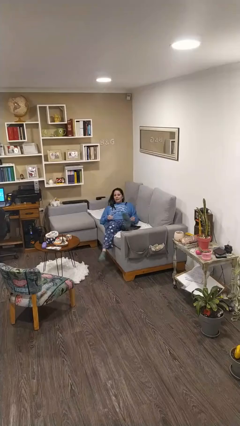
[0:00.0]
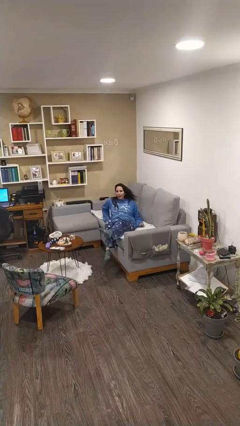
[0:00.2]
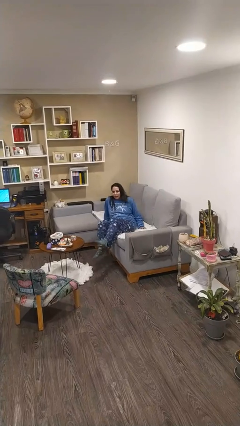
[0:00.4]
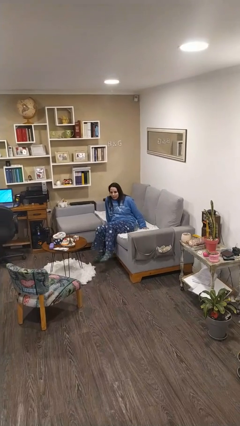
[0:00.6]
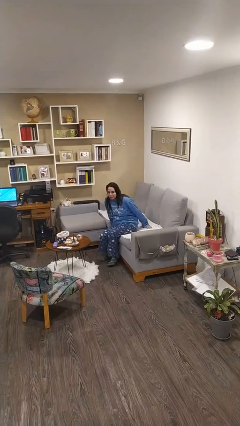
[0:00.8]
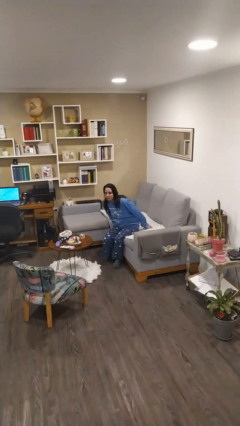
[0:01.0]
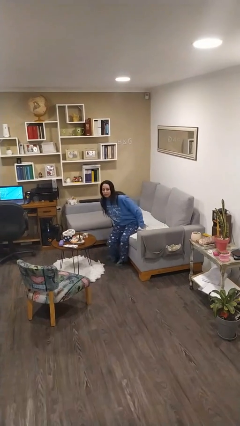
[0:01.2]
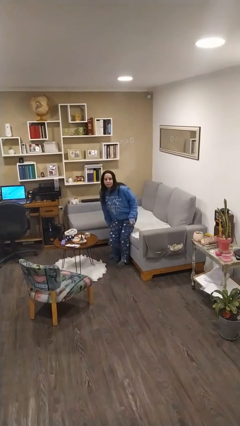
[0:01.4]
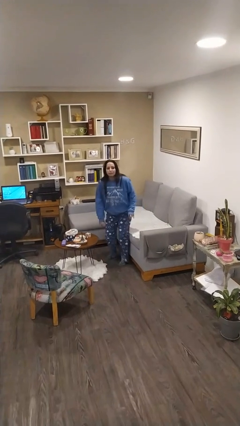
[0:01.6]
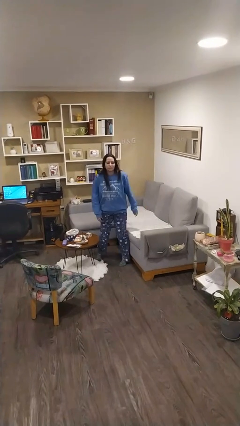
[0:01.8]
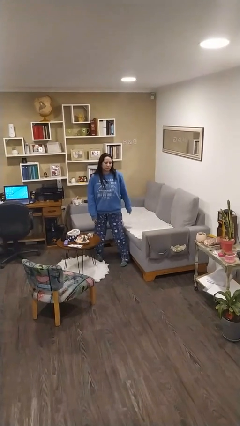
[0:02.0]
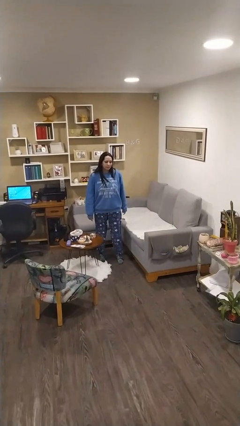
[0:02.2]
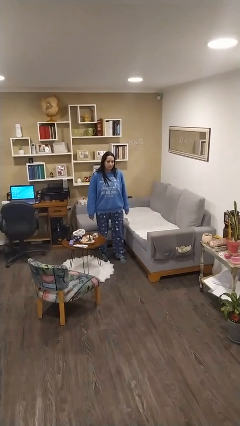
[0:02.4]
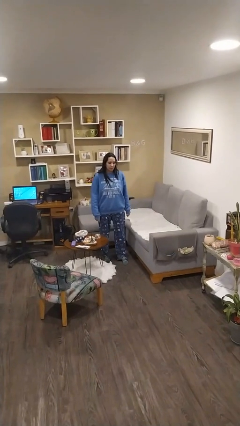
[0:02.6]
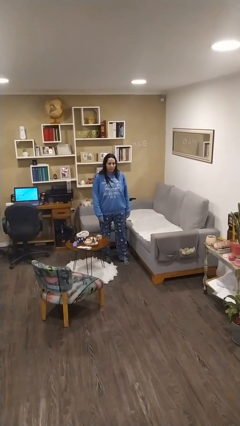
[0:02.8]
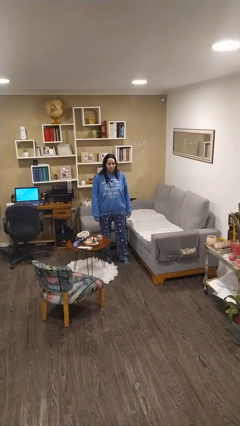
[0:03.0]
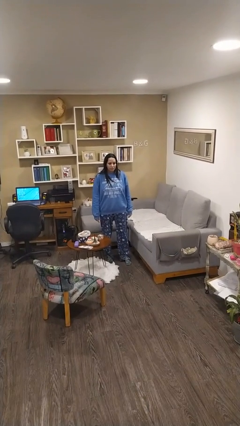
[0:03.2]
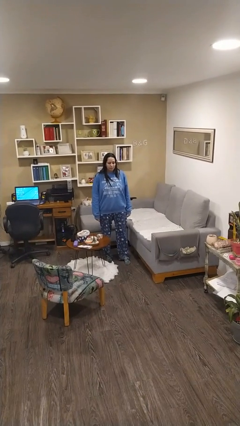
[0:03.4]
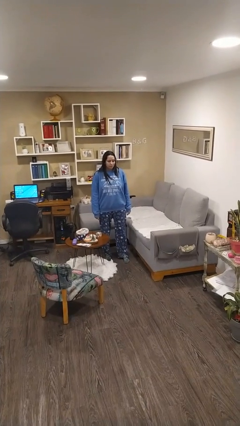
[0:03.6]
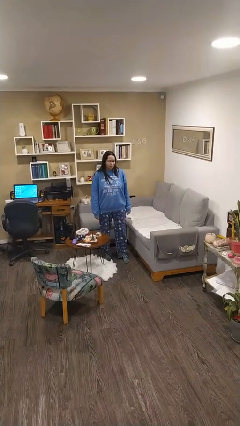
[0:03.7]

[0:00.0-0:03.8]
person stands up

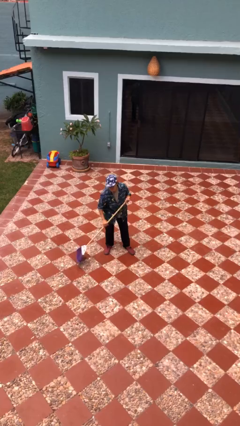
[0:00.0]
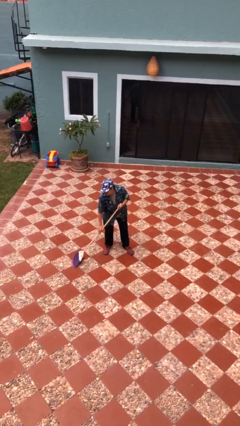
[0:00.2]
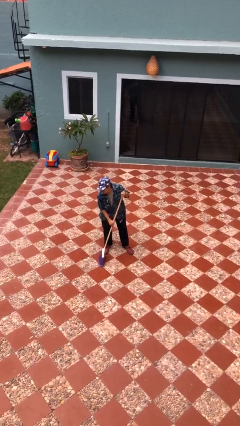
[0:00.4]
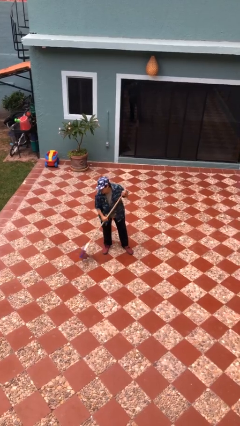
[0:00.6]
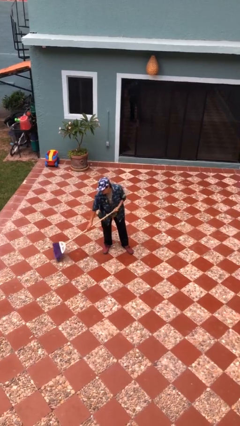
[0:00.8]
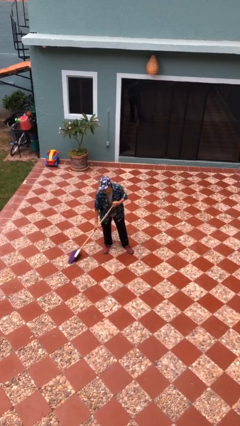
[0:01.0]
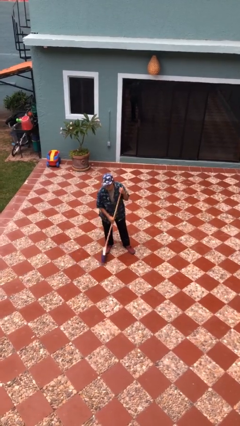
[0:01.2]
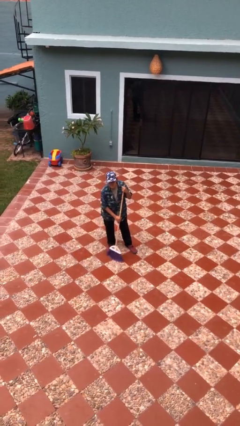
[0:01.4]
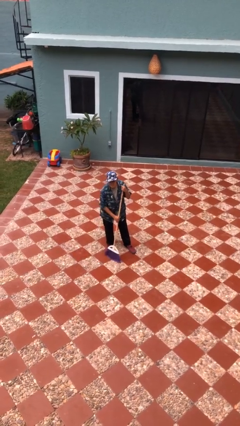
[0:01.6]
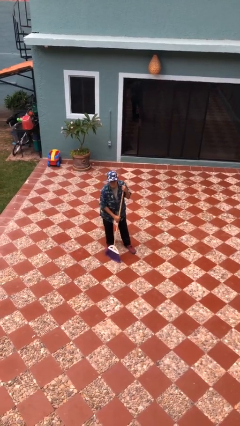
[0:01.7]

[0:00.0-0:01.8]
person sweeps floor

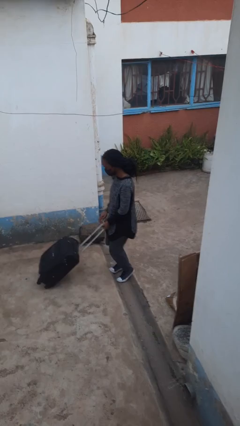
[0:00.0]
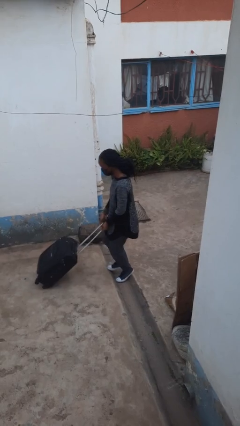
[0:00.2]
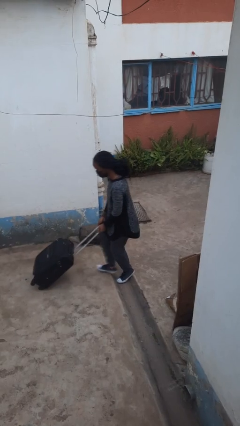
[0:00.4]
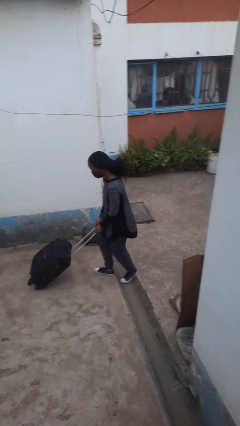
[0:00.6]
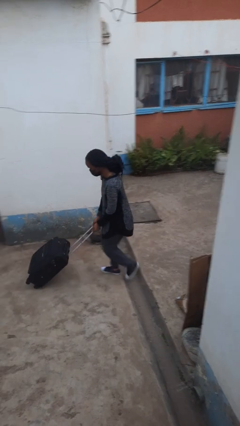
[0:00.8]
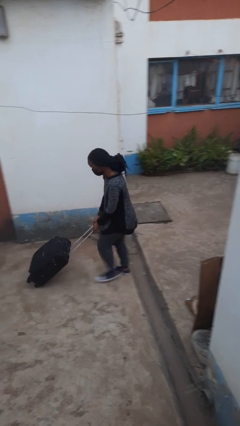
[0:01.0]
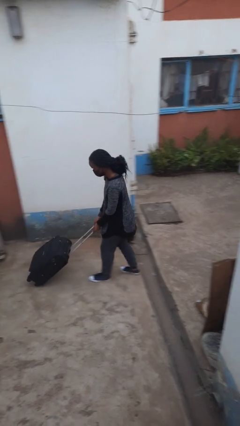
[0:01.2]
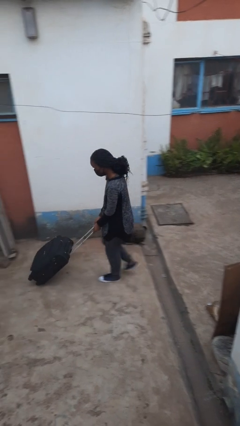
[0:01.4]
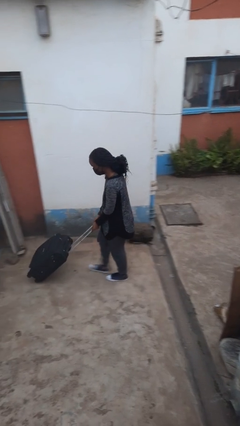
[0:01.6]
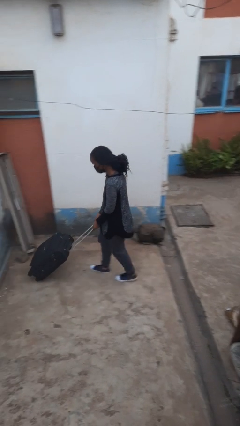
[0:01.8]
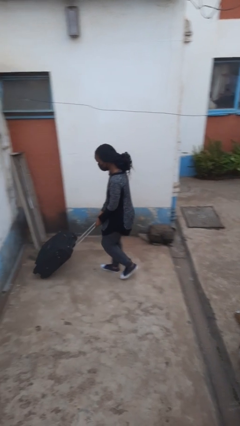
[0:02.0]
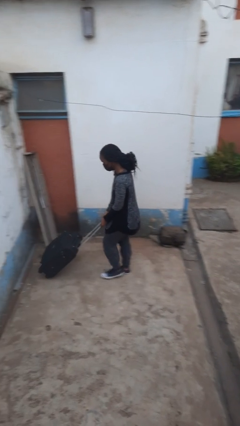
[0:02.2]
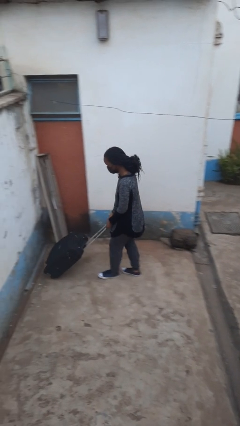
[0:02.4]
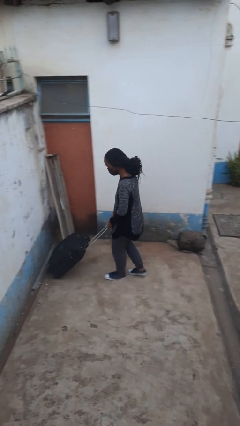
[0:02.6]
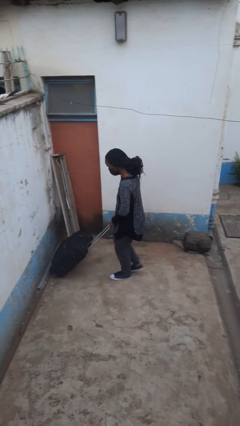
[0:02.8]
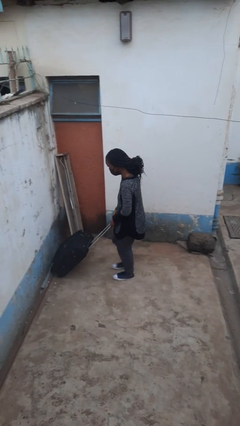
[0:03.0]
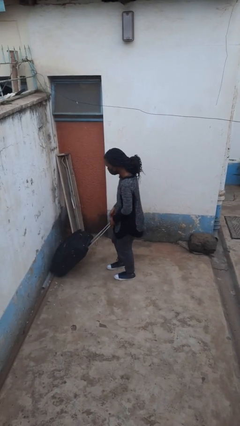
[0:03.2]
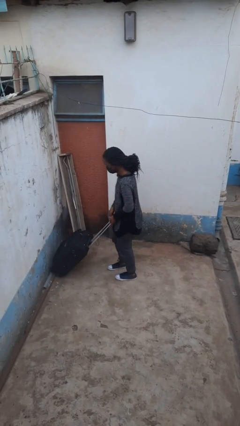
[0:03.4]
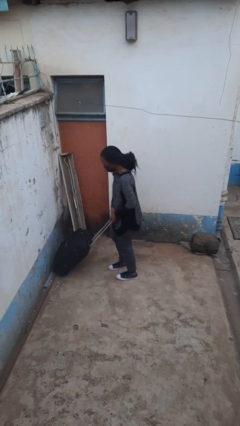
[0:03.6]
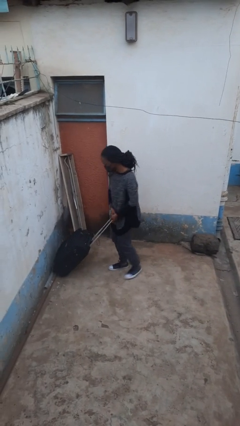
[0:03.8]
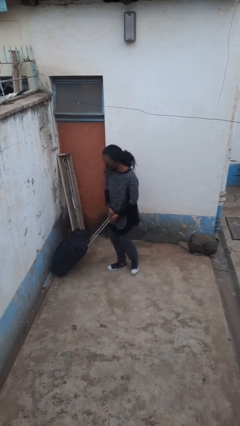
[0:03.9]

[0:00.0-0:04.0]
person pushes wheeled cart

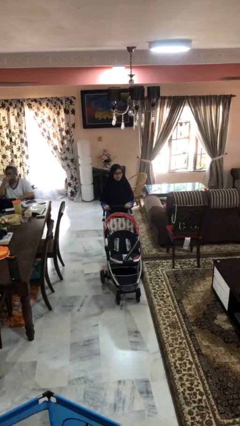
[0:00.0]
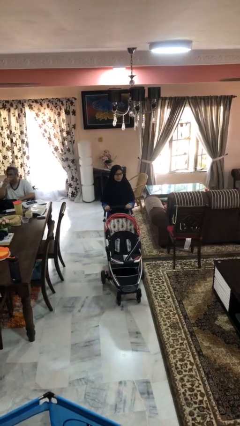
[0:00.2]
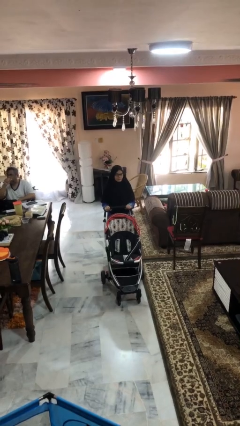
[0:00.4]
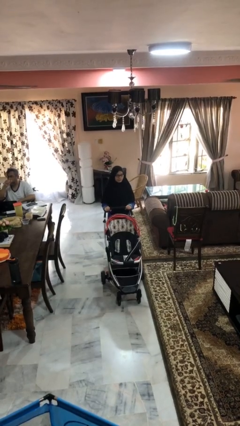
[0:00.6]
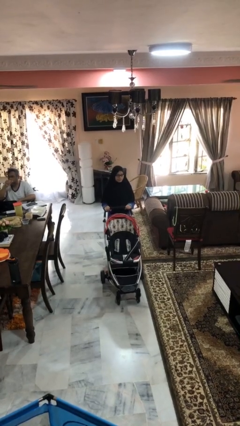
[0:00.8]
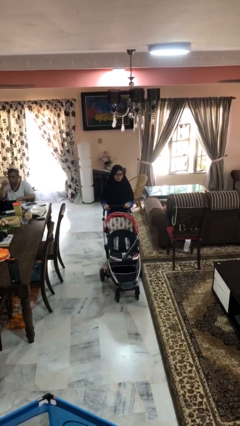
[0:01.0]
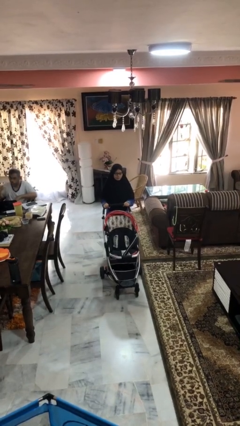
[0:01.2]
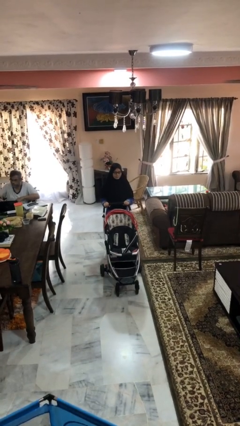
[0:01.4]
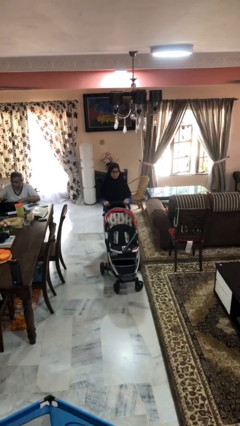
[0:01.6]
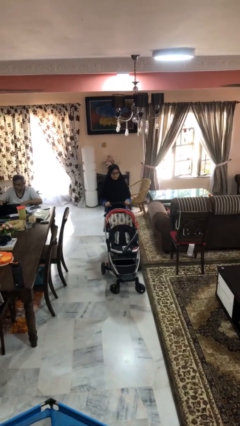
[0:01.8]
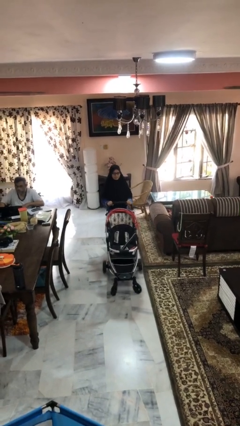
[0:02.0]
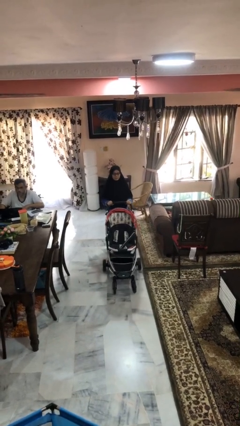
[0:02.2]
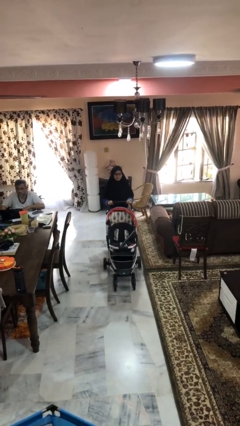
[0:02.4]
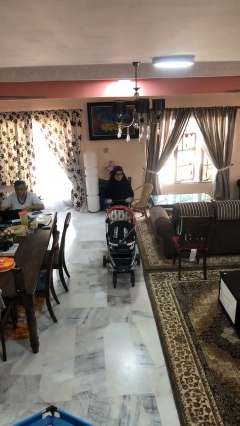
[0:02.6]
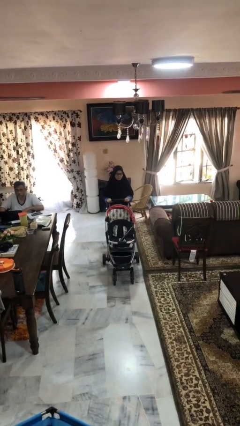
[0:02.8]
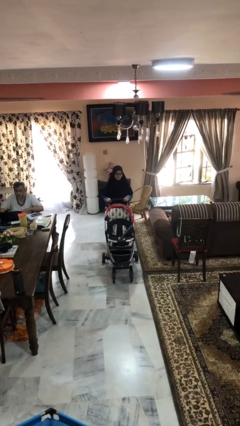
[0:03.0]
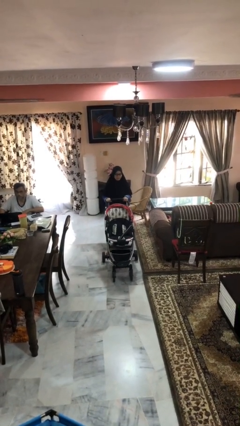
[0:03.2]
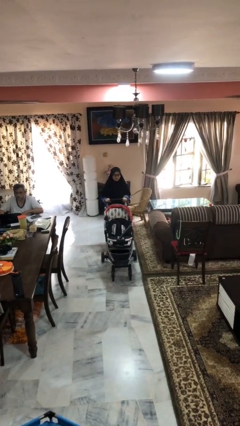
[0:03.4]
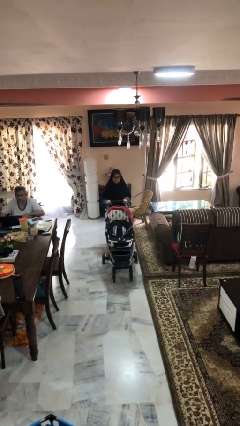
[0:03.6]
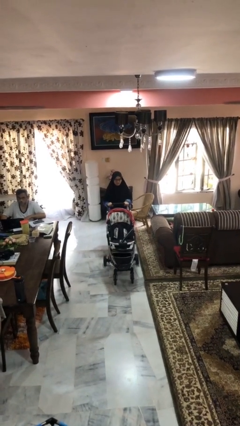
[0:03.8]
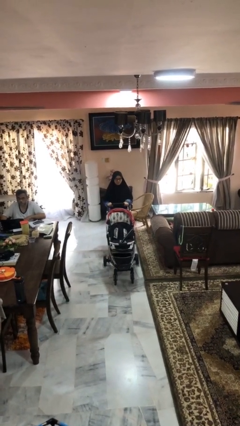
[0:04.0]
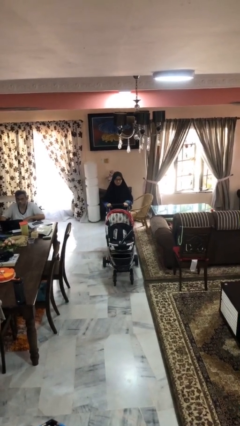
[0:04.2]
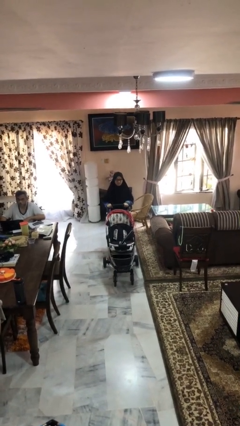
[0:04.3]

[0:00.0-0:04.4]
person pulls wheeled cart

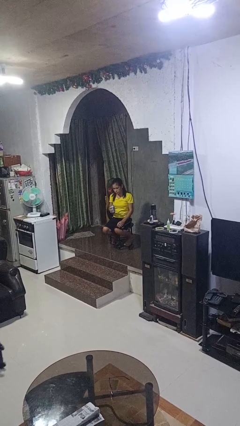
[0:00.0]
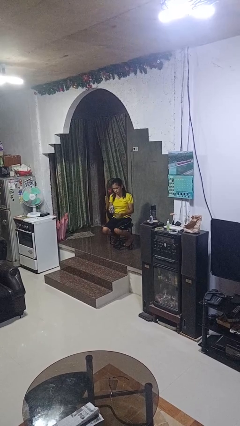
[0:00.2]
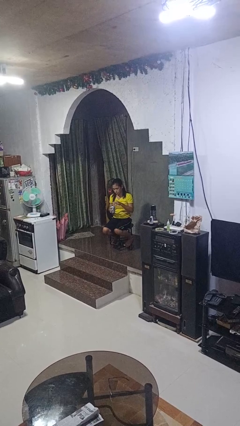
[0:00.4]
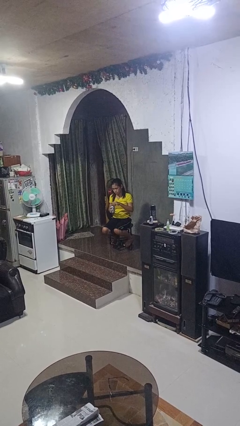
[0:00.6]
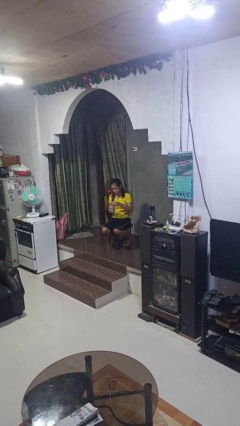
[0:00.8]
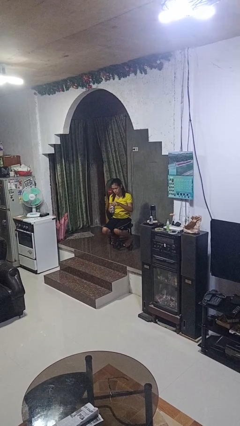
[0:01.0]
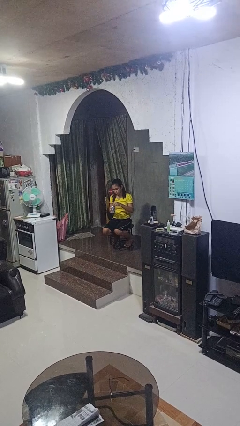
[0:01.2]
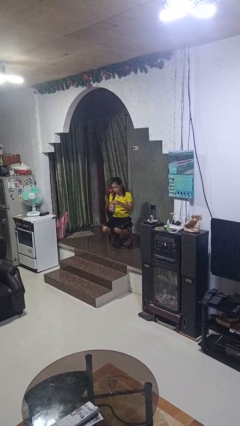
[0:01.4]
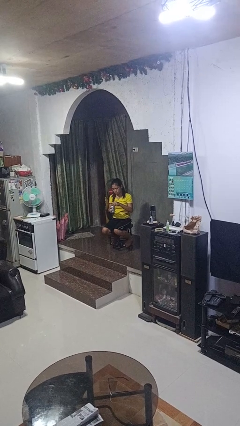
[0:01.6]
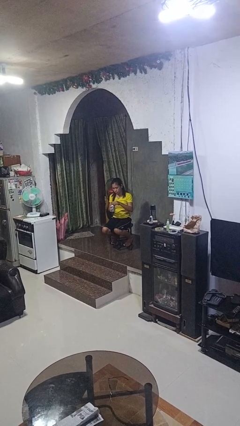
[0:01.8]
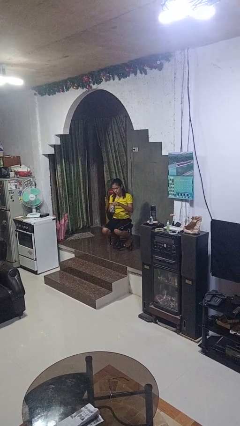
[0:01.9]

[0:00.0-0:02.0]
person opens beverage can

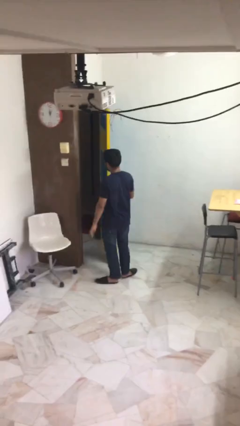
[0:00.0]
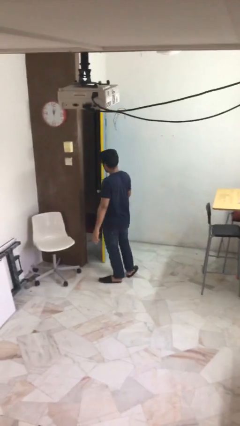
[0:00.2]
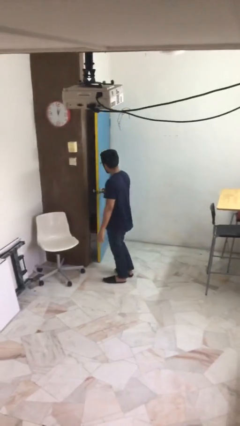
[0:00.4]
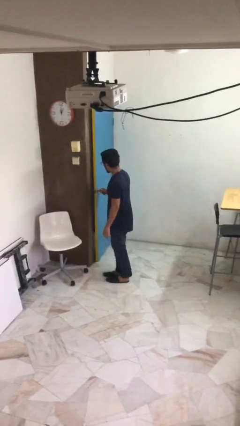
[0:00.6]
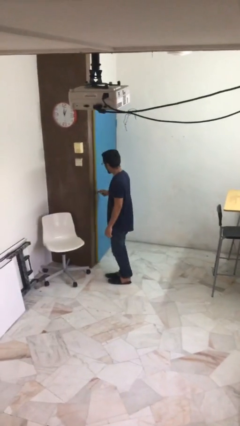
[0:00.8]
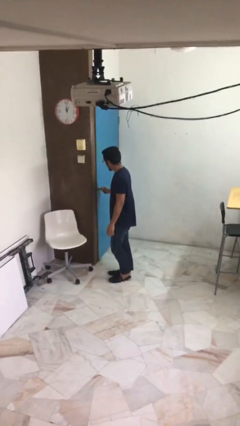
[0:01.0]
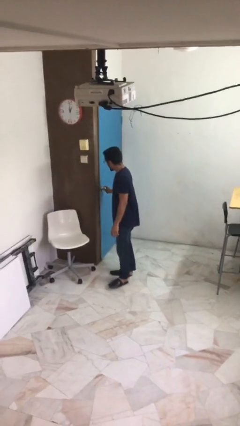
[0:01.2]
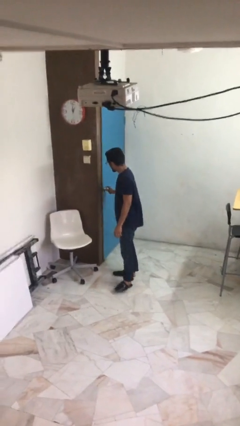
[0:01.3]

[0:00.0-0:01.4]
person closes facility door
